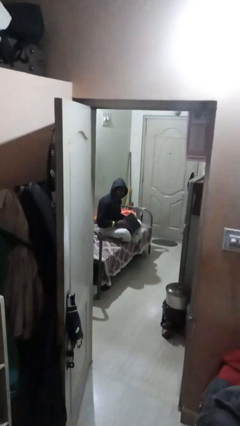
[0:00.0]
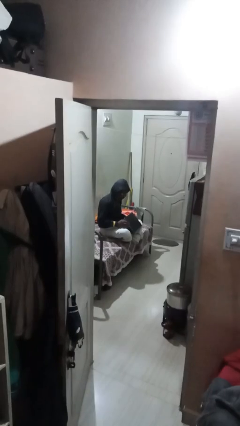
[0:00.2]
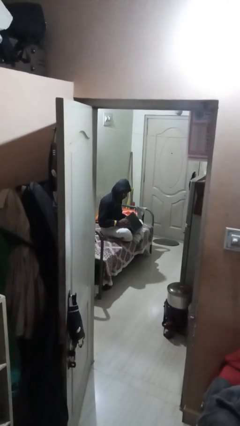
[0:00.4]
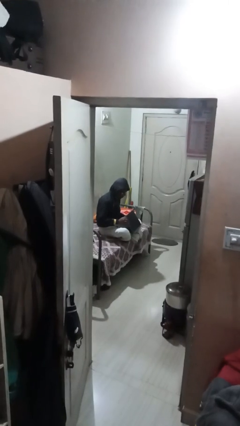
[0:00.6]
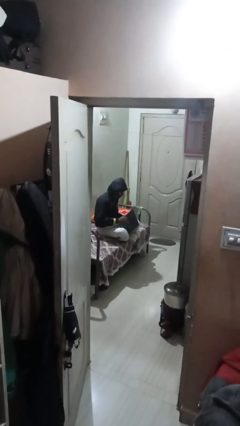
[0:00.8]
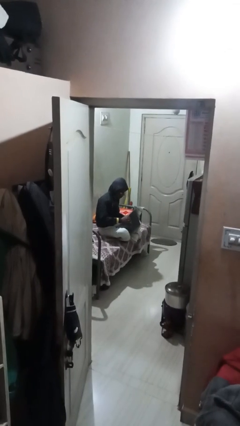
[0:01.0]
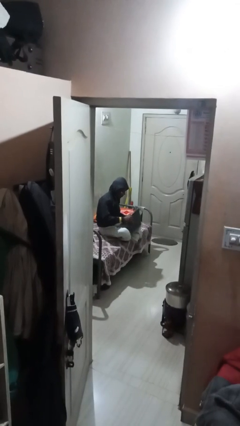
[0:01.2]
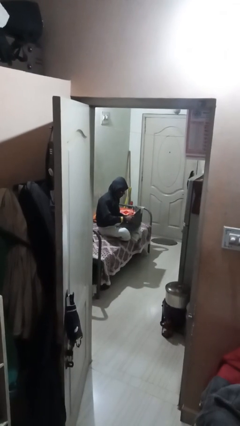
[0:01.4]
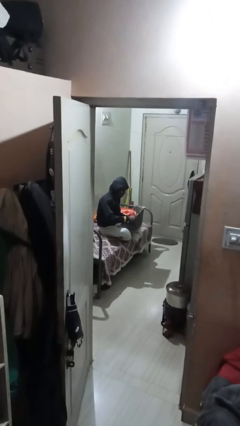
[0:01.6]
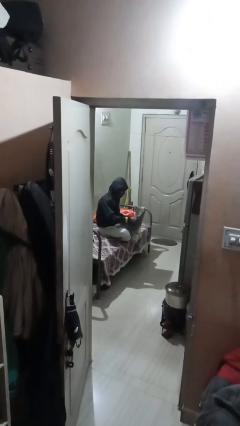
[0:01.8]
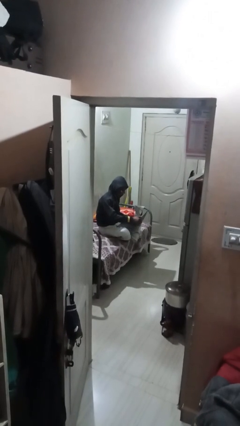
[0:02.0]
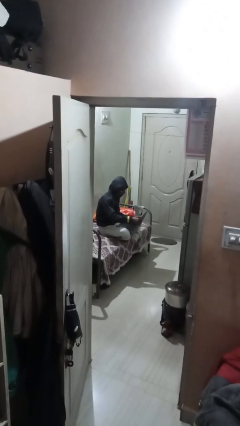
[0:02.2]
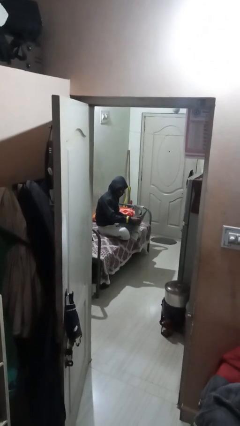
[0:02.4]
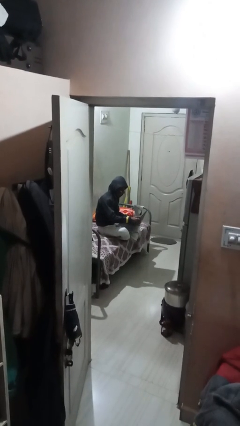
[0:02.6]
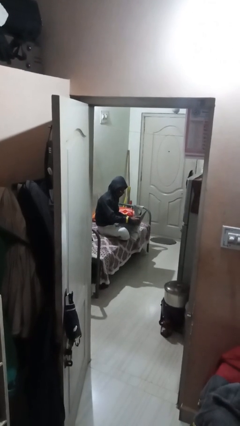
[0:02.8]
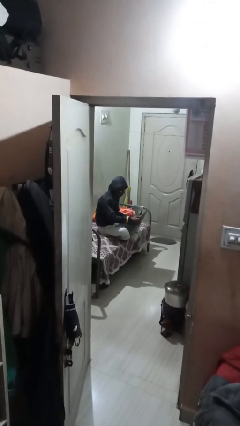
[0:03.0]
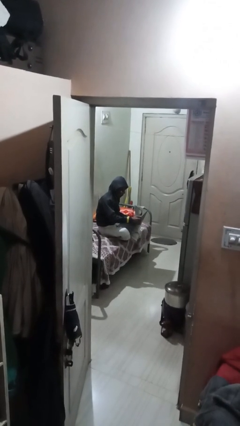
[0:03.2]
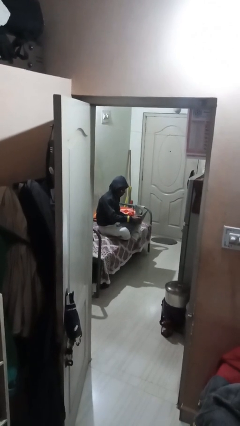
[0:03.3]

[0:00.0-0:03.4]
person interacts with laptop

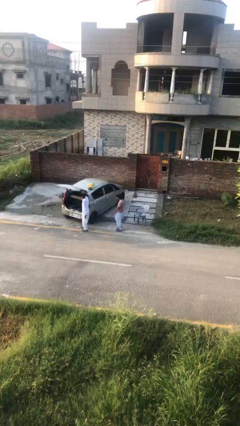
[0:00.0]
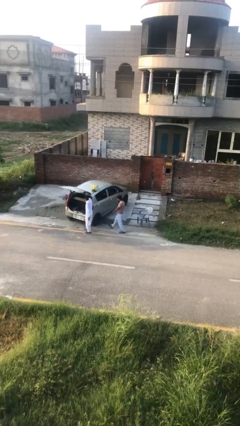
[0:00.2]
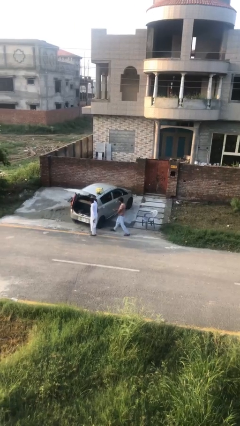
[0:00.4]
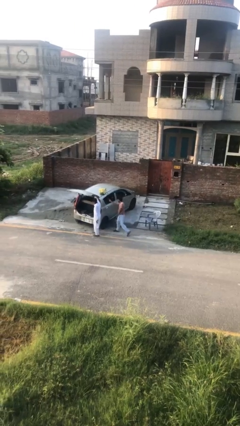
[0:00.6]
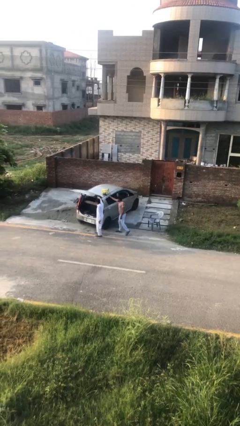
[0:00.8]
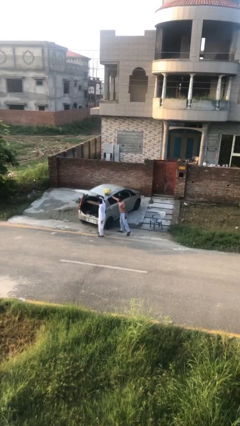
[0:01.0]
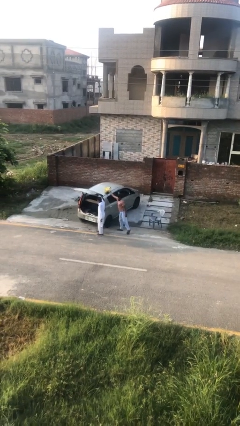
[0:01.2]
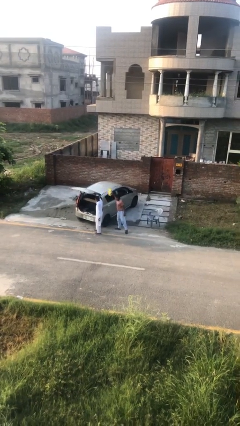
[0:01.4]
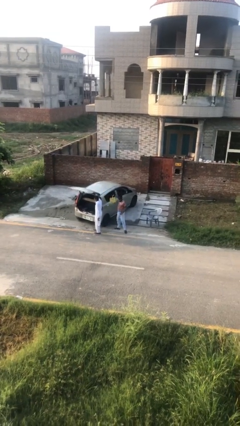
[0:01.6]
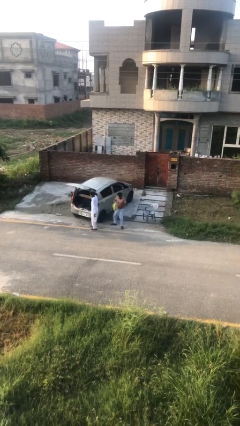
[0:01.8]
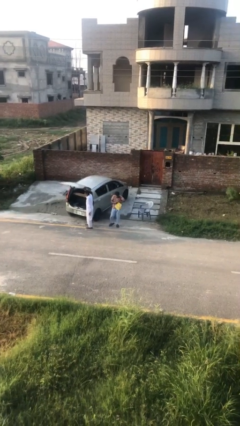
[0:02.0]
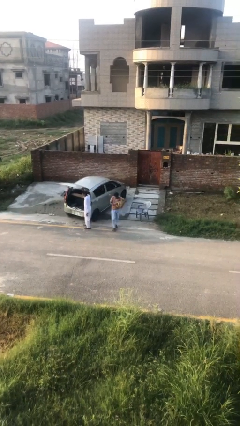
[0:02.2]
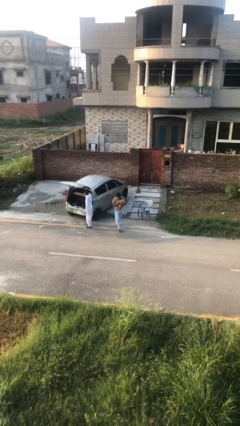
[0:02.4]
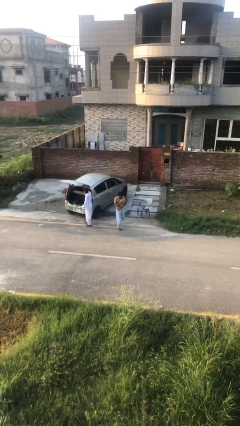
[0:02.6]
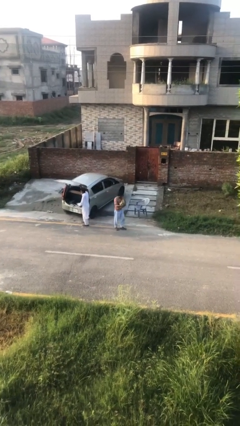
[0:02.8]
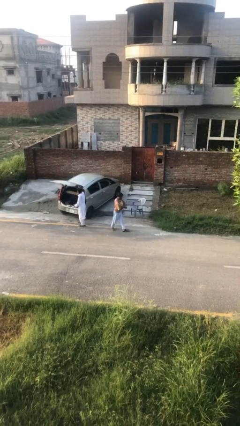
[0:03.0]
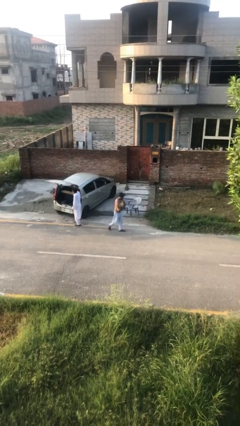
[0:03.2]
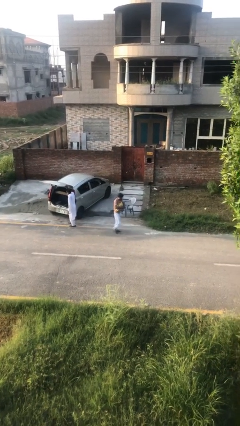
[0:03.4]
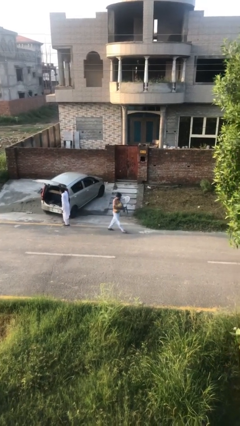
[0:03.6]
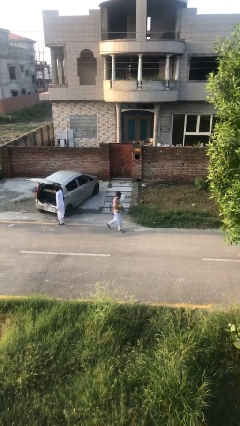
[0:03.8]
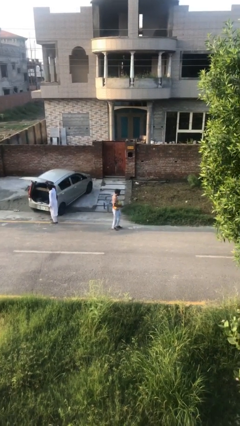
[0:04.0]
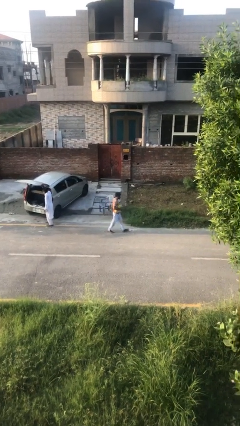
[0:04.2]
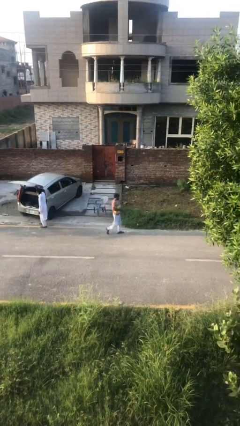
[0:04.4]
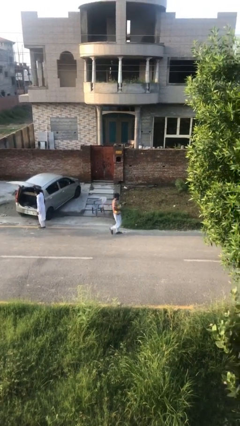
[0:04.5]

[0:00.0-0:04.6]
person steals object from person

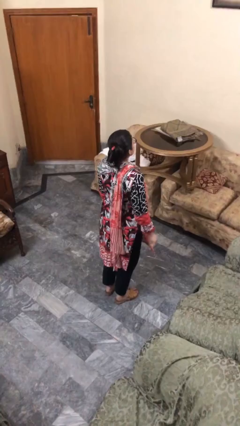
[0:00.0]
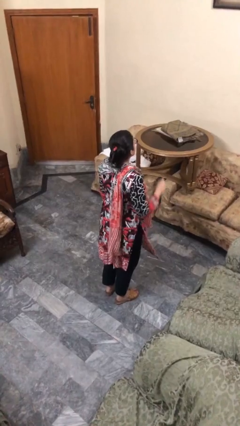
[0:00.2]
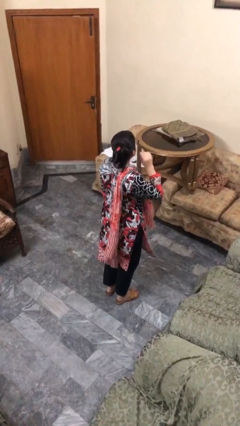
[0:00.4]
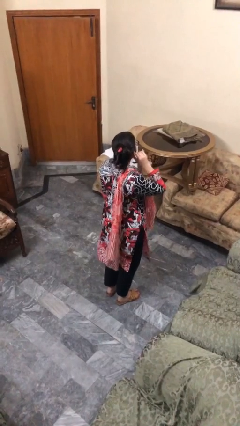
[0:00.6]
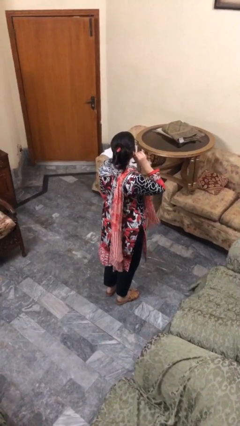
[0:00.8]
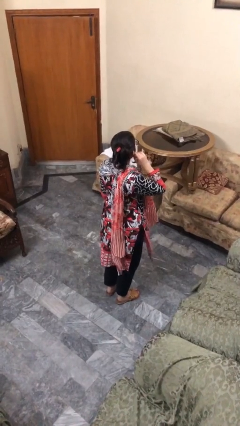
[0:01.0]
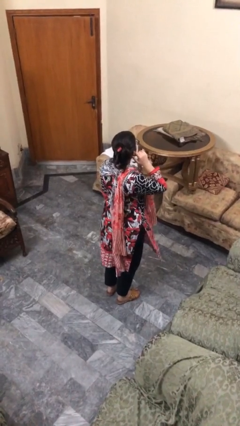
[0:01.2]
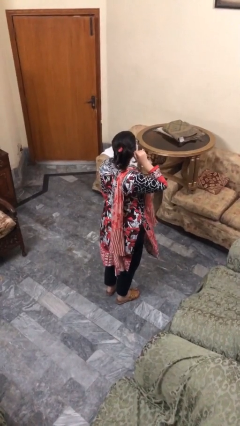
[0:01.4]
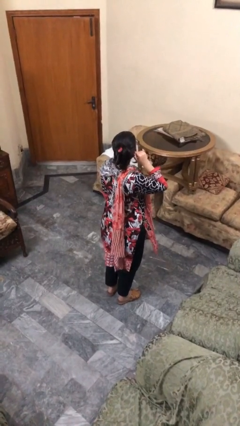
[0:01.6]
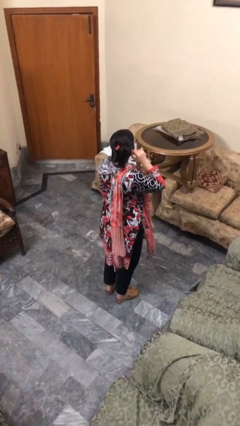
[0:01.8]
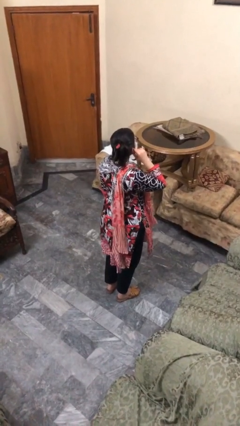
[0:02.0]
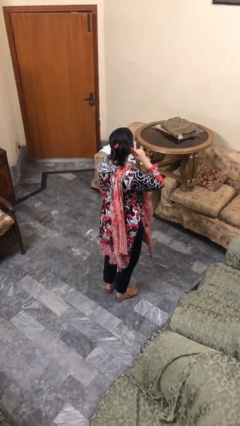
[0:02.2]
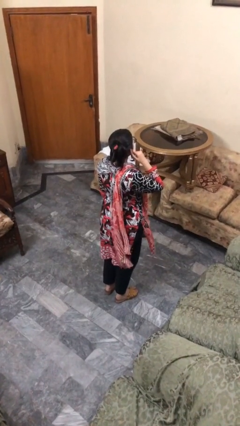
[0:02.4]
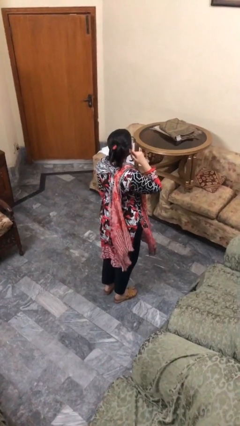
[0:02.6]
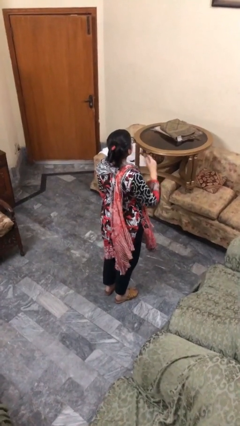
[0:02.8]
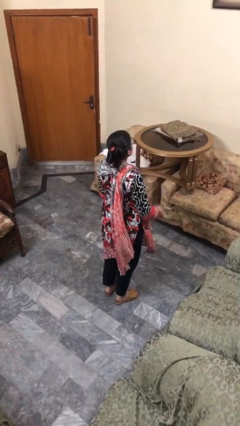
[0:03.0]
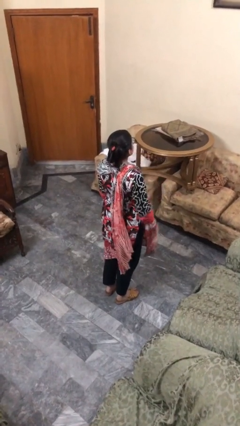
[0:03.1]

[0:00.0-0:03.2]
person touches earlobe

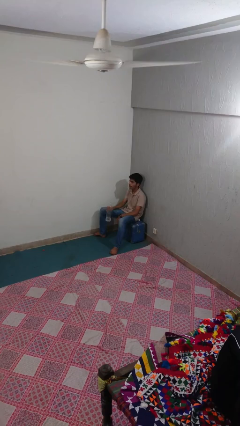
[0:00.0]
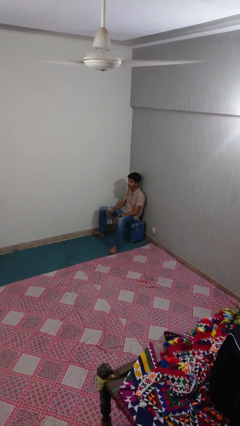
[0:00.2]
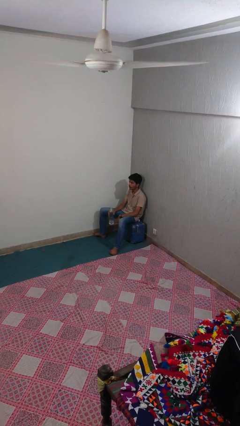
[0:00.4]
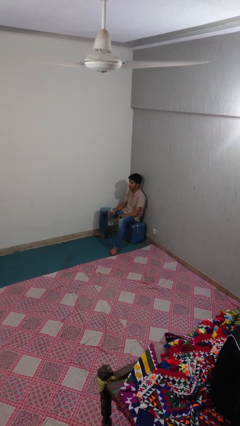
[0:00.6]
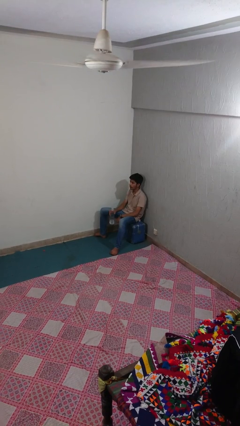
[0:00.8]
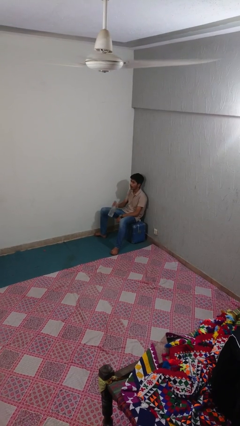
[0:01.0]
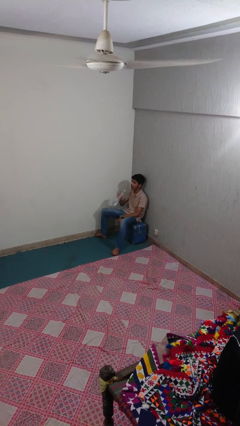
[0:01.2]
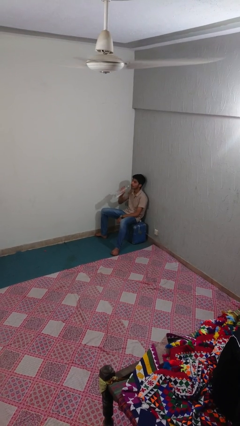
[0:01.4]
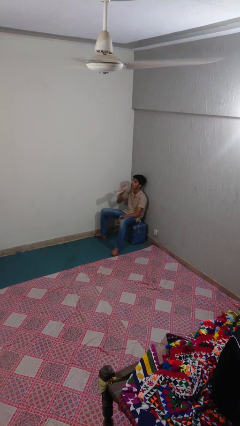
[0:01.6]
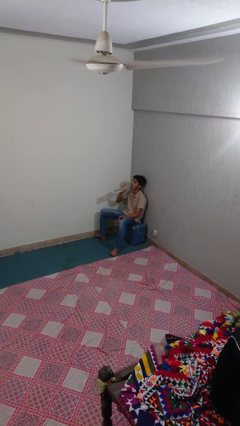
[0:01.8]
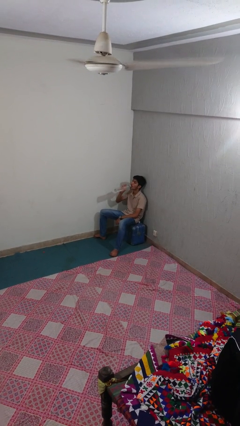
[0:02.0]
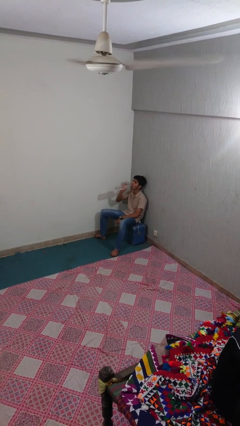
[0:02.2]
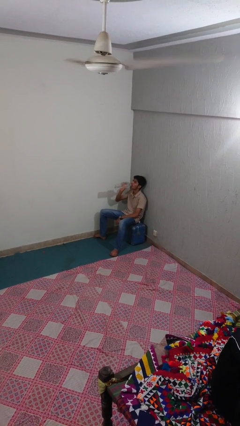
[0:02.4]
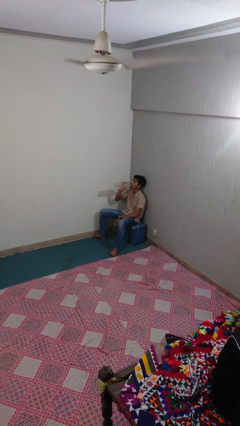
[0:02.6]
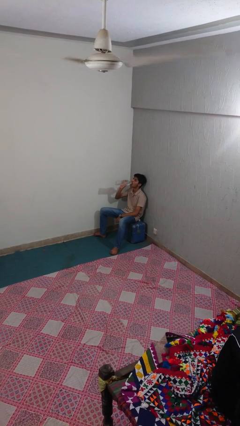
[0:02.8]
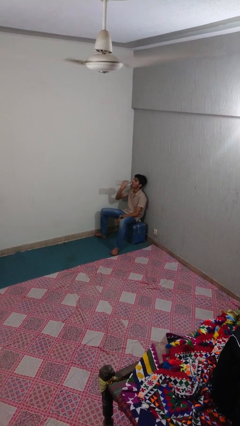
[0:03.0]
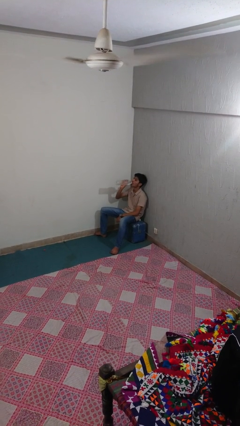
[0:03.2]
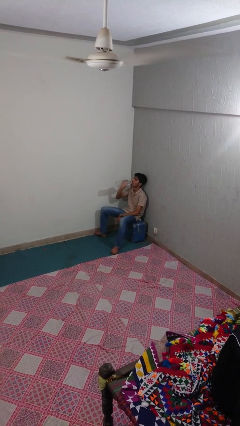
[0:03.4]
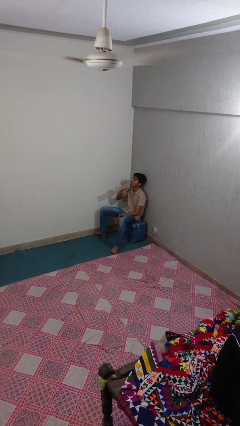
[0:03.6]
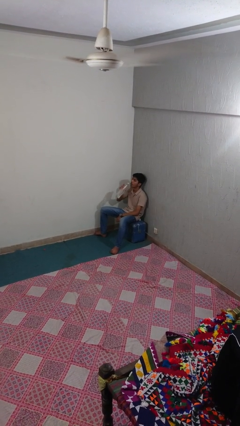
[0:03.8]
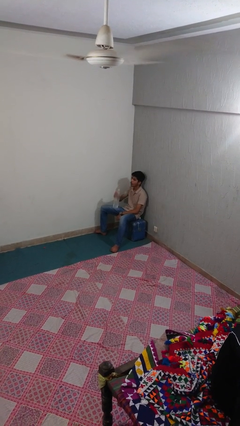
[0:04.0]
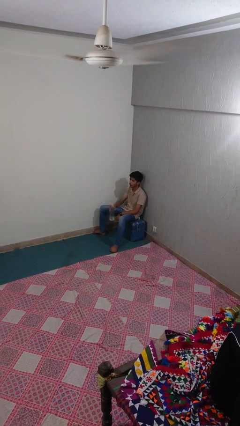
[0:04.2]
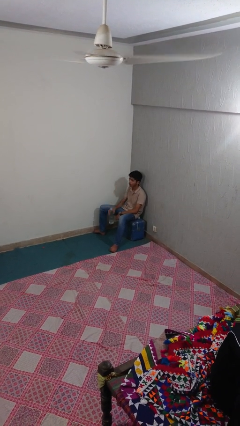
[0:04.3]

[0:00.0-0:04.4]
person drinks from bottle

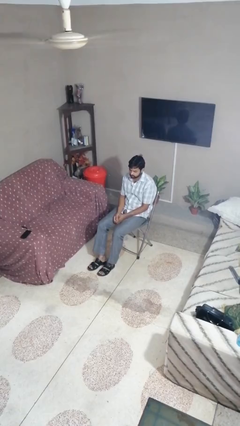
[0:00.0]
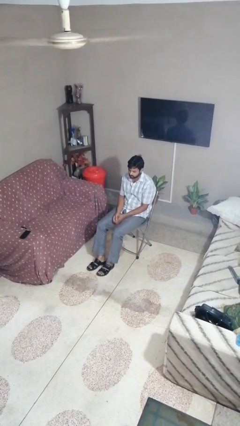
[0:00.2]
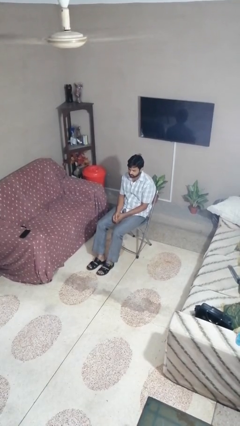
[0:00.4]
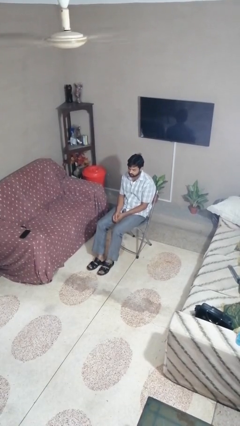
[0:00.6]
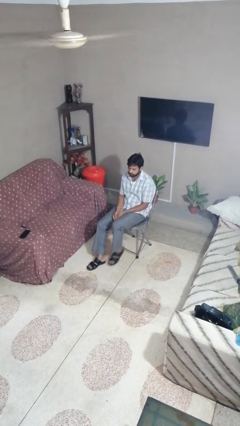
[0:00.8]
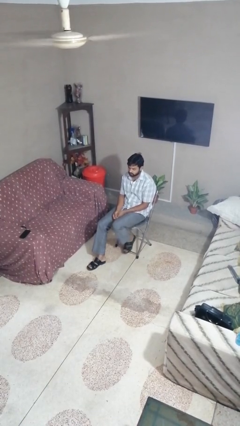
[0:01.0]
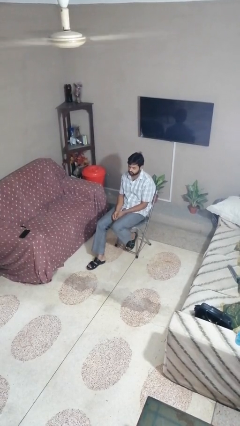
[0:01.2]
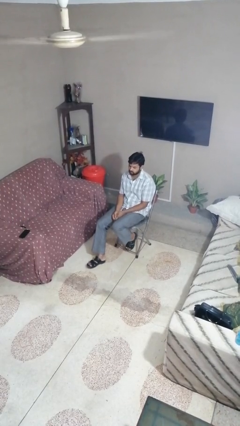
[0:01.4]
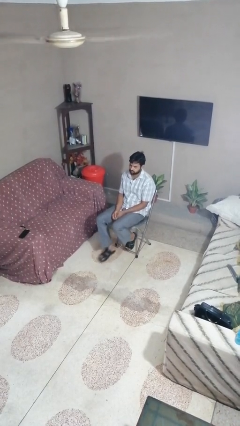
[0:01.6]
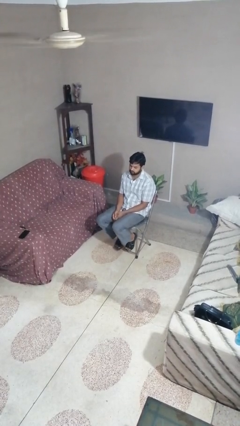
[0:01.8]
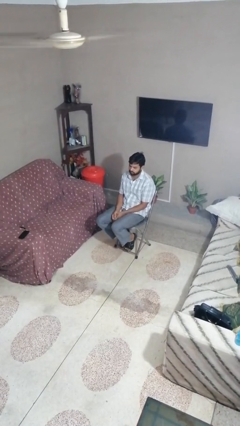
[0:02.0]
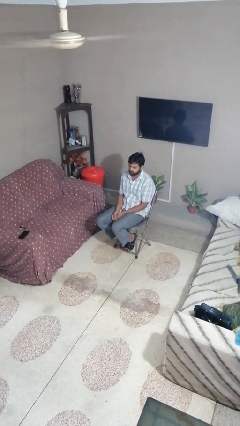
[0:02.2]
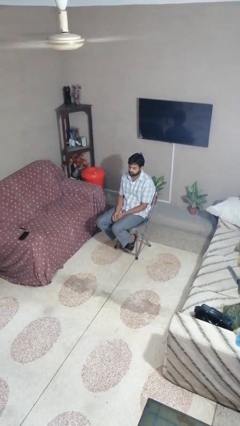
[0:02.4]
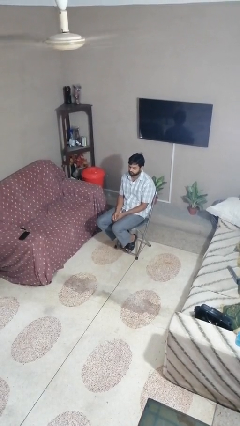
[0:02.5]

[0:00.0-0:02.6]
person puts feet up
